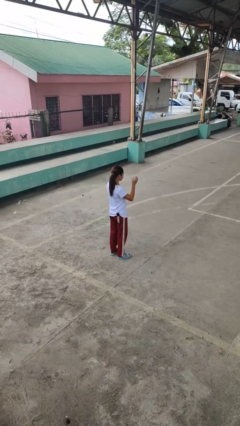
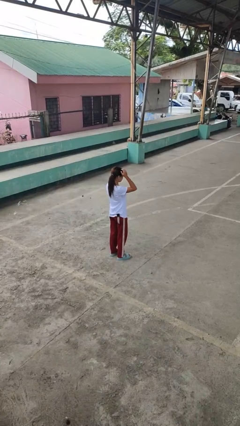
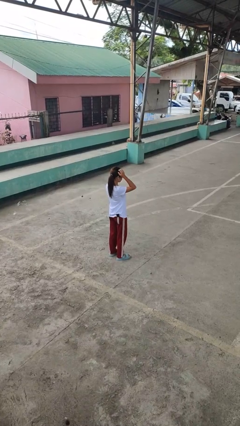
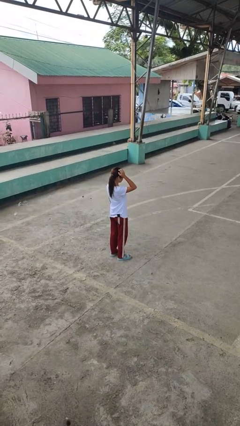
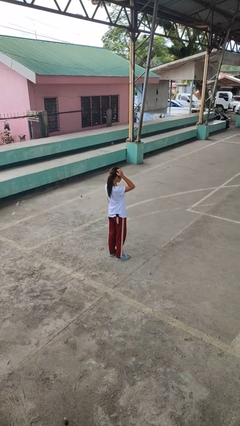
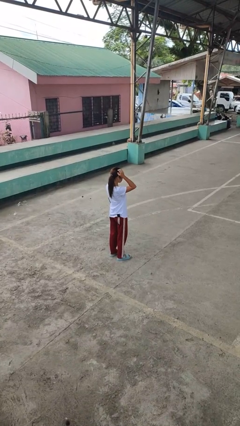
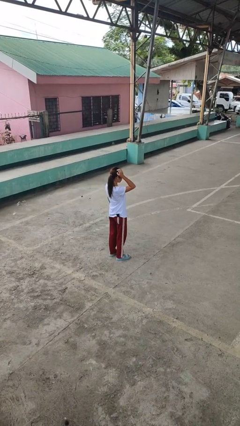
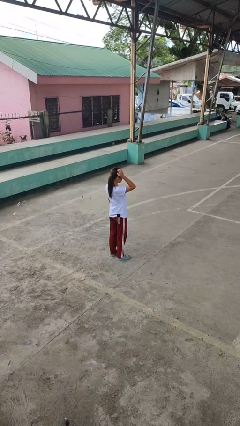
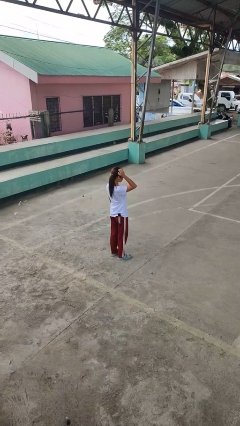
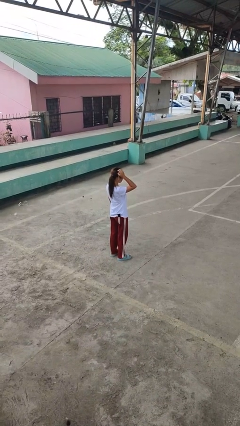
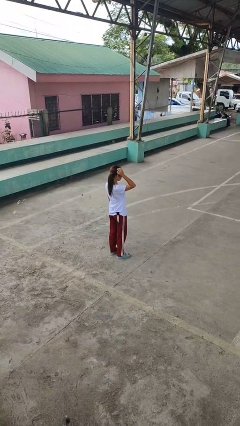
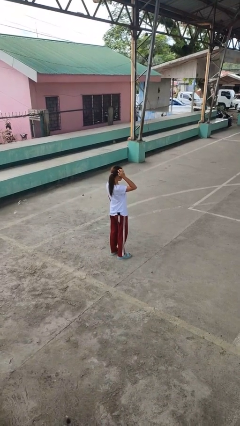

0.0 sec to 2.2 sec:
person scratches face

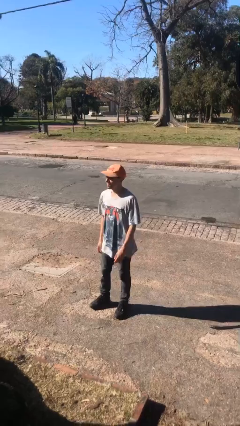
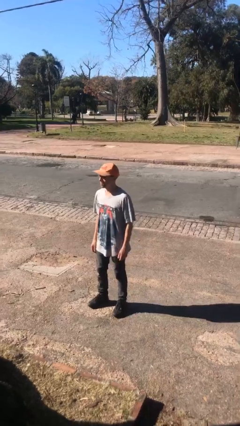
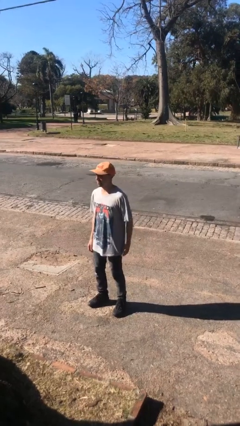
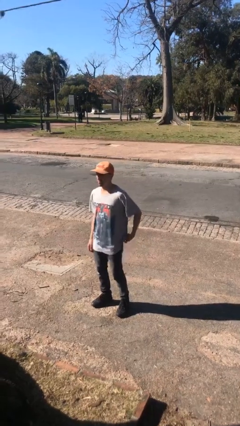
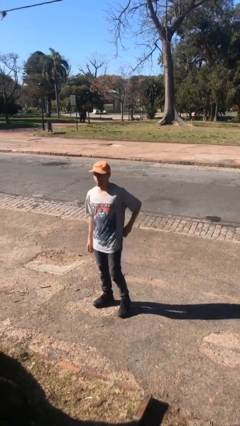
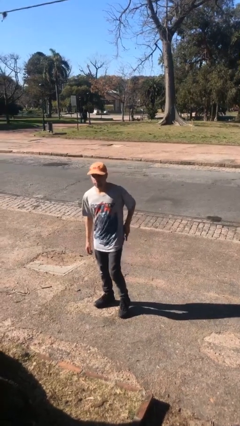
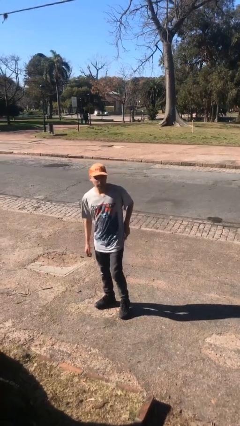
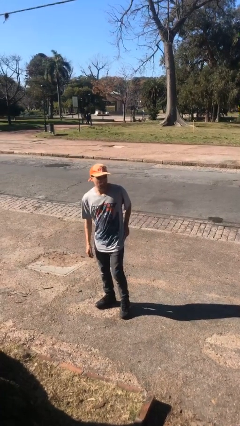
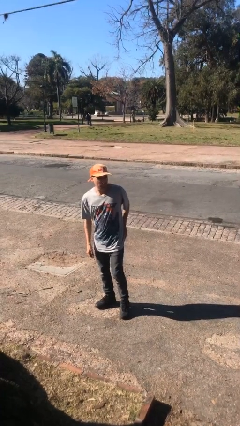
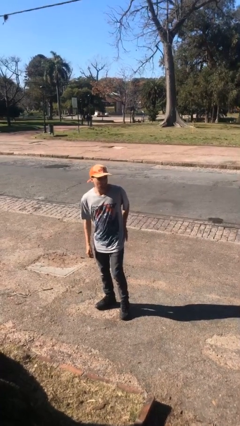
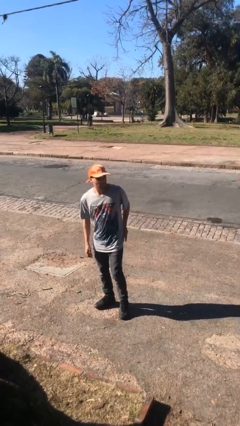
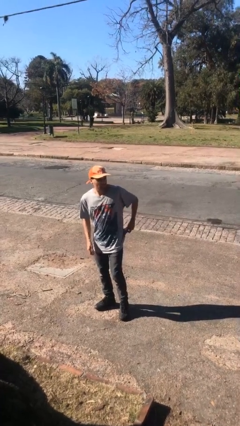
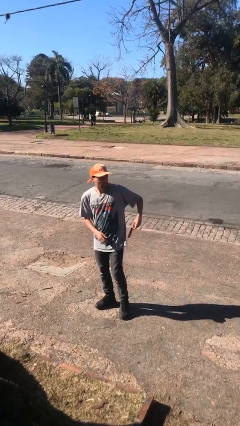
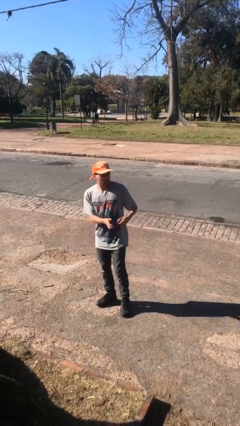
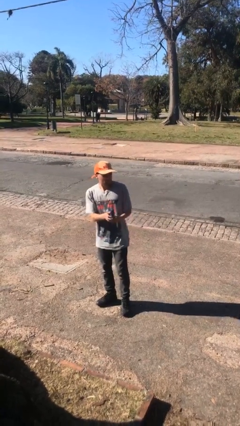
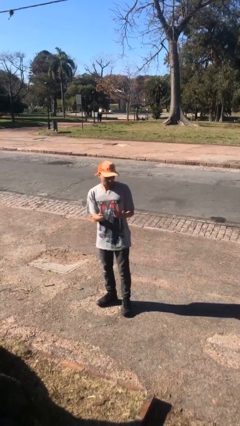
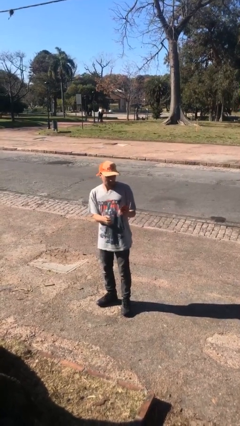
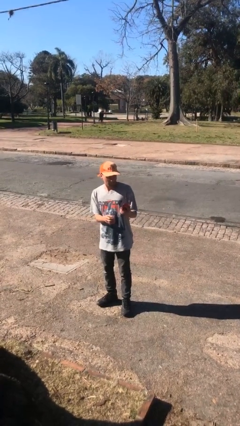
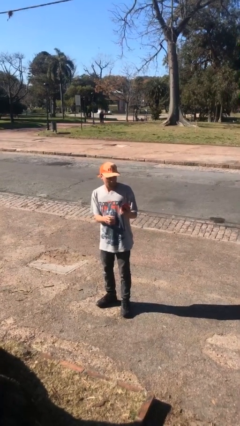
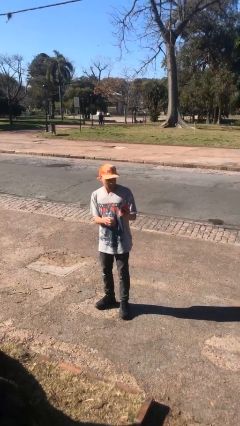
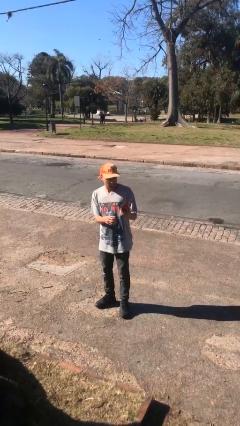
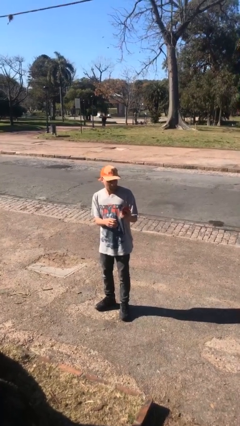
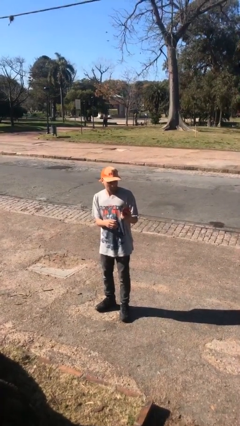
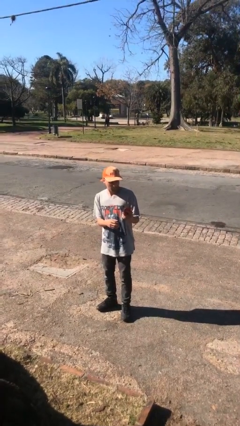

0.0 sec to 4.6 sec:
person takes phone from pocket

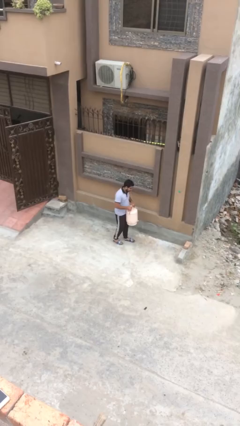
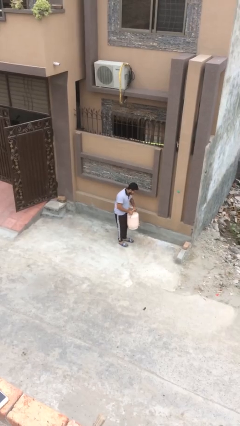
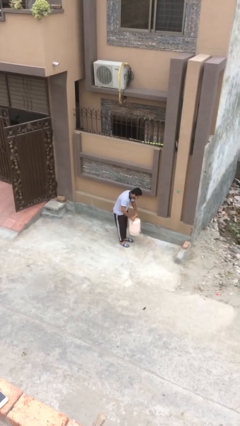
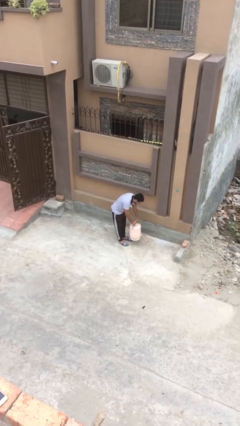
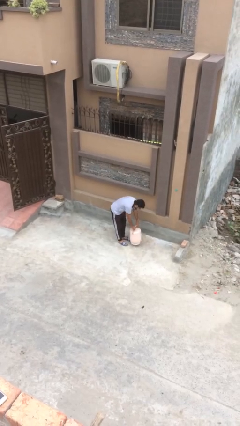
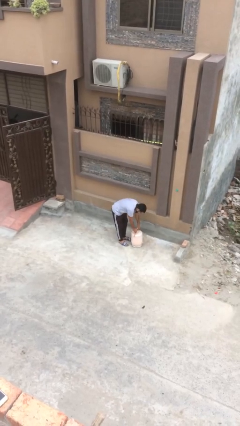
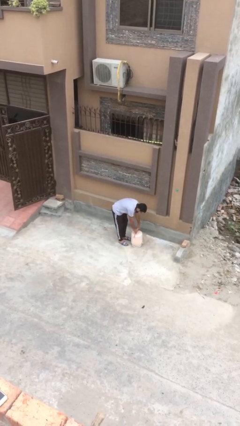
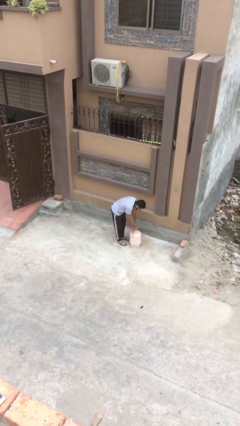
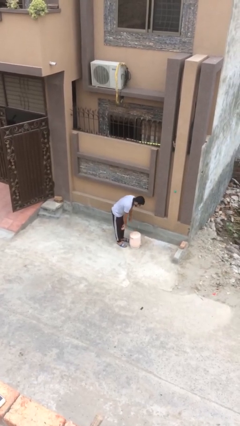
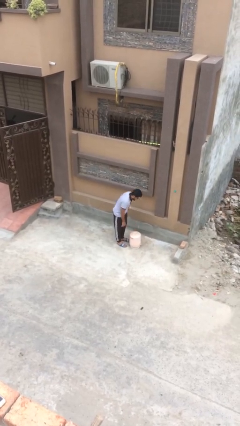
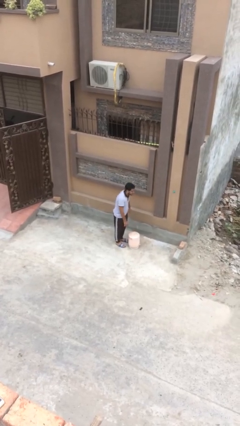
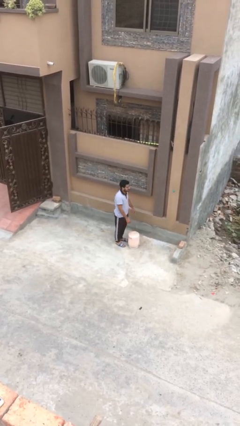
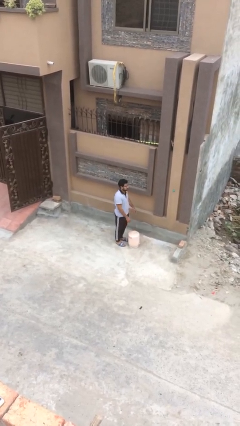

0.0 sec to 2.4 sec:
person puts down object on floor

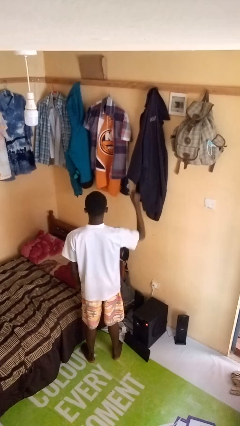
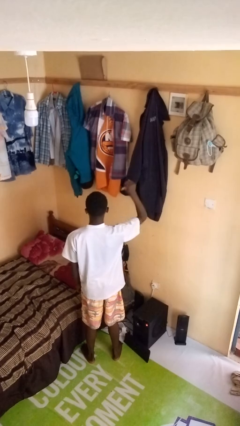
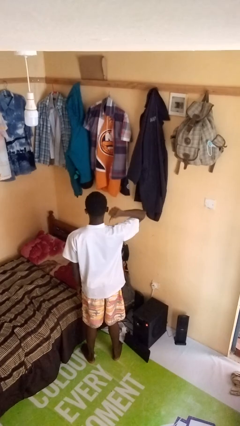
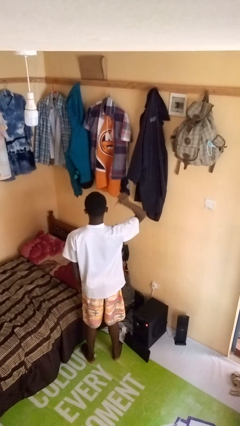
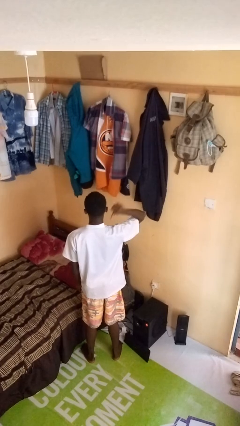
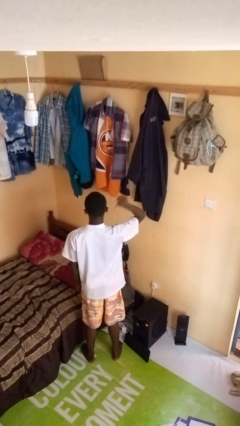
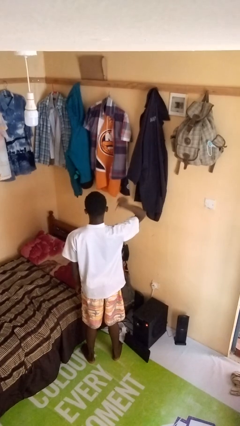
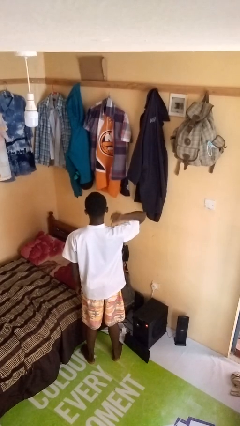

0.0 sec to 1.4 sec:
person gestures behind me

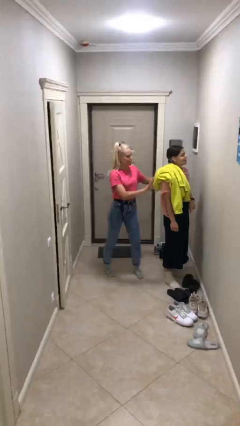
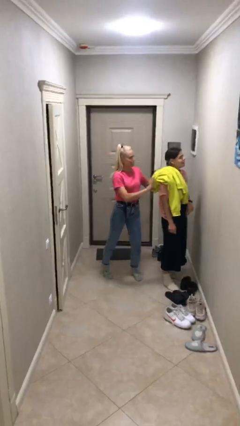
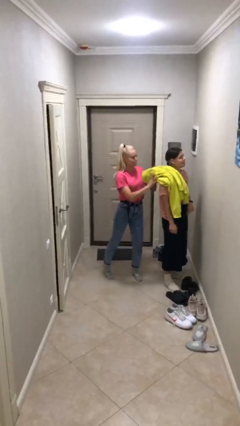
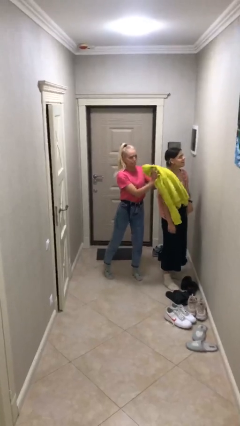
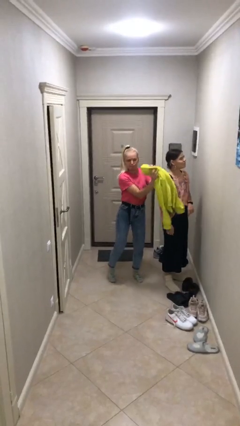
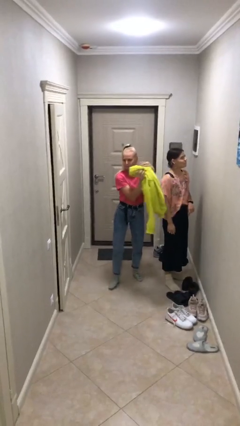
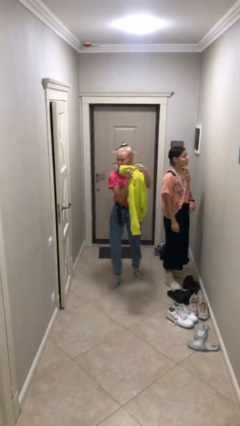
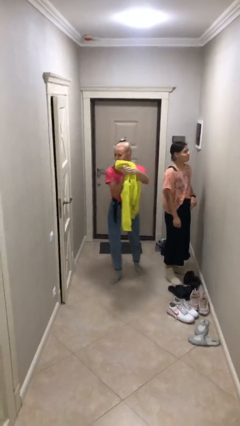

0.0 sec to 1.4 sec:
person steals object from person

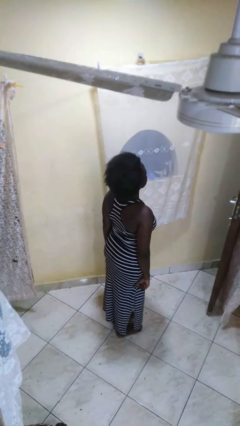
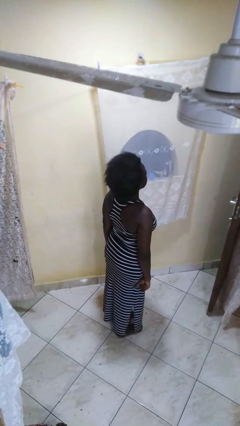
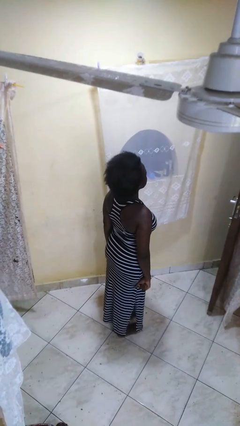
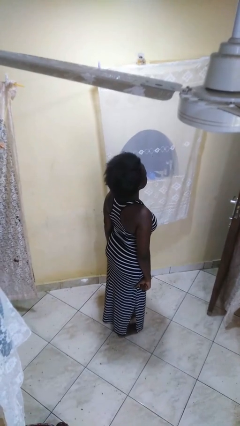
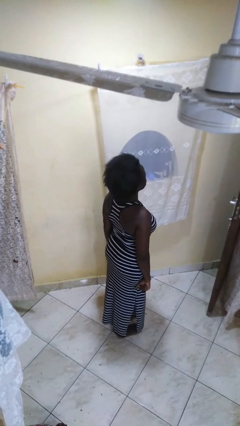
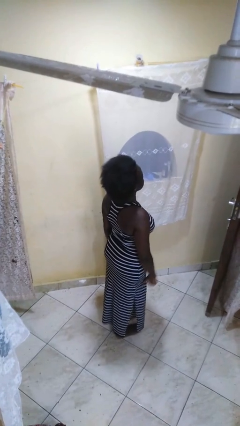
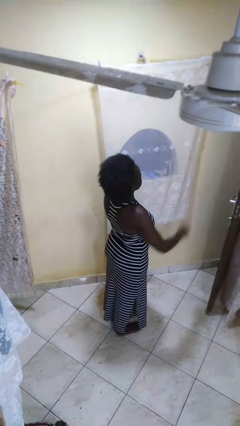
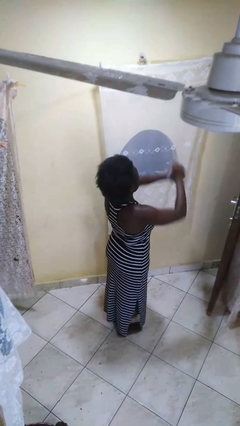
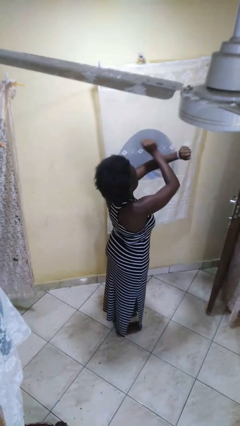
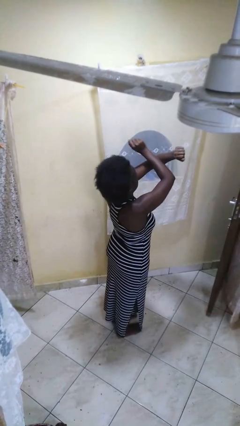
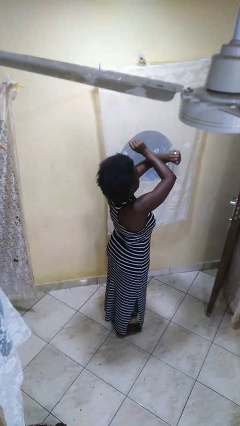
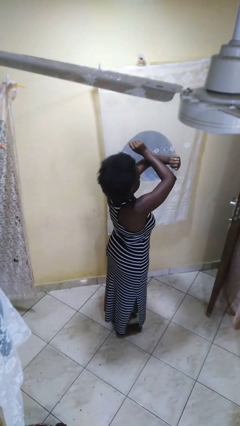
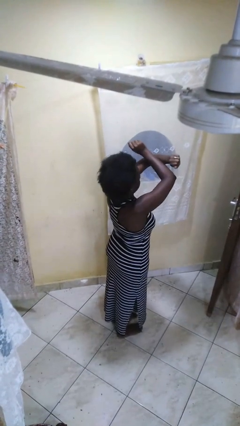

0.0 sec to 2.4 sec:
person gestures arms x

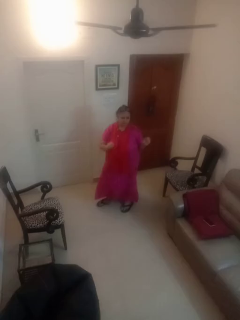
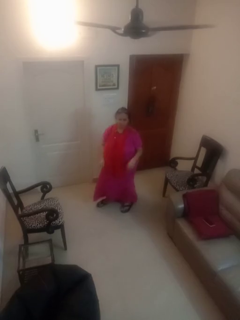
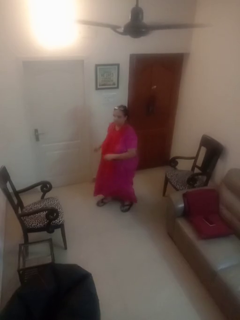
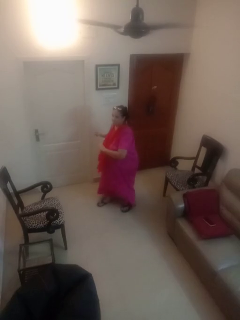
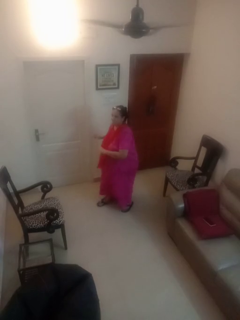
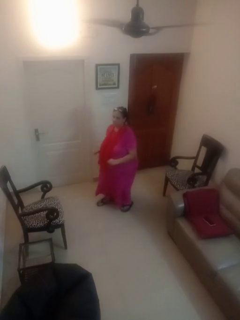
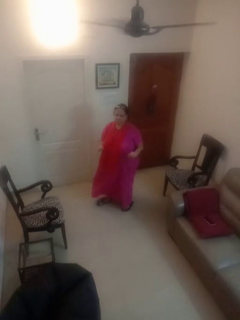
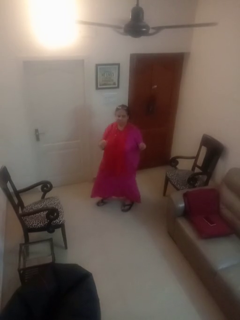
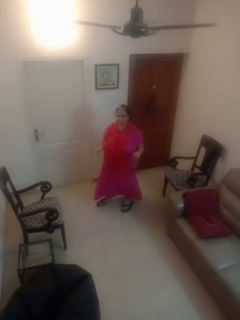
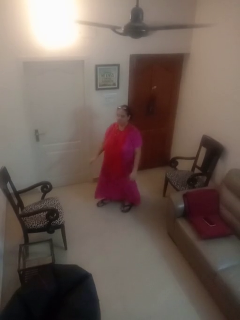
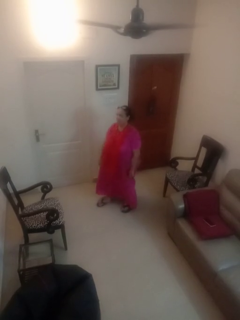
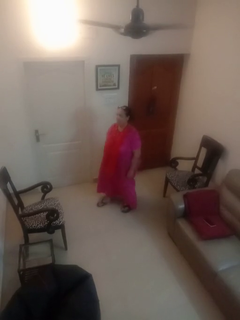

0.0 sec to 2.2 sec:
person dances in place

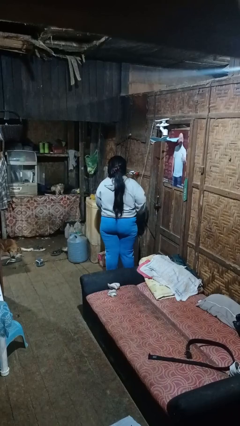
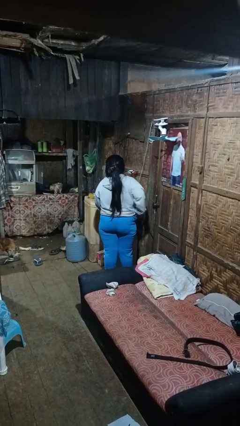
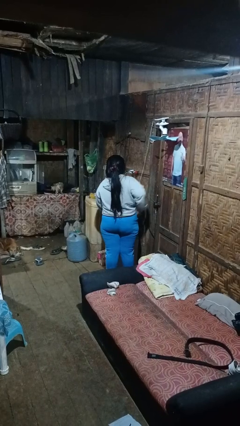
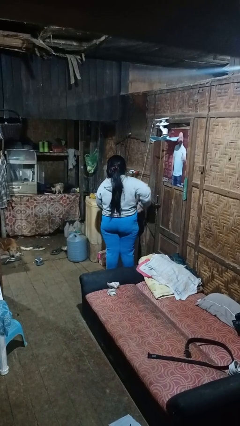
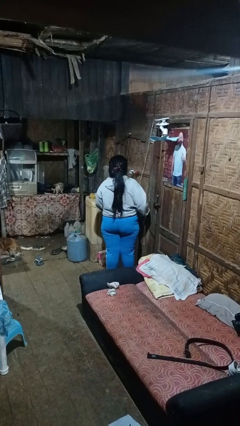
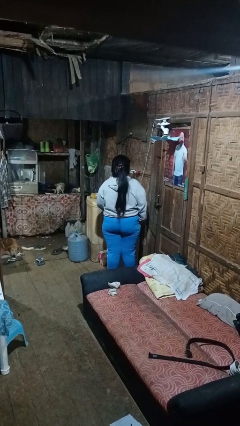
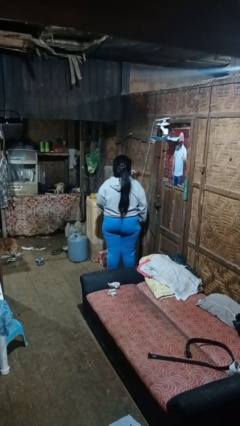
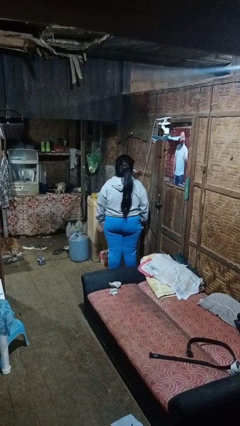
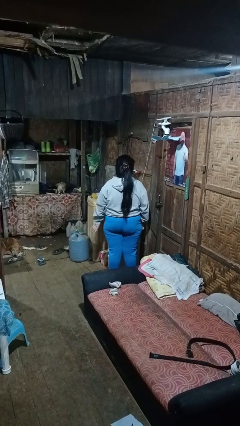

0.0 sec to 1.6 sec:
person hikes up pants
